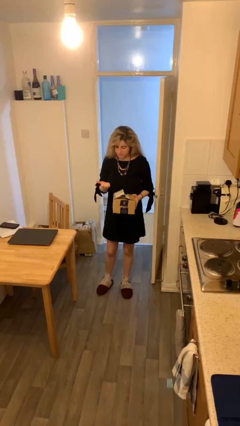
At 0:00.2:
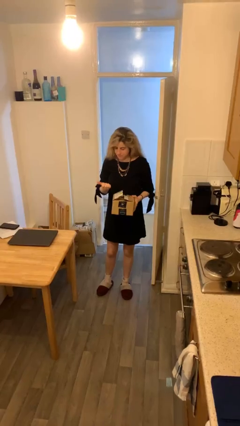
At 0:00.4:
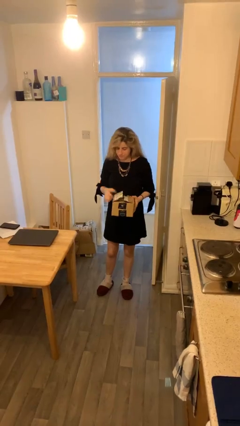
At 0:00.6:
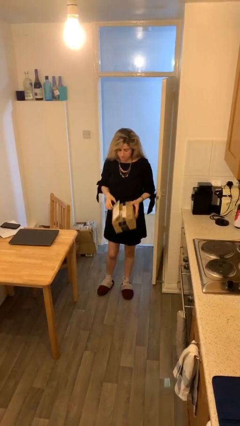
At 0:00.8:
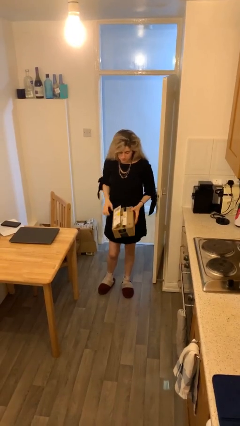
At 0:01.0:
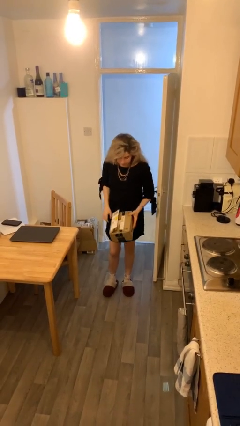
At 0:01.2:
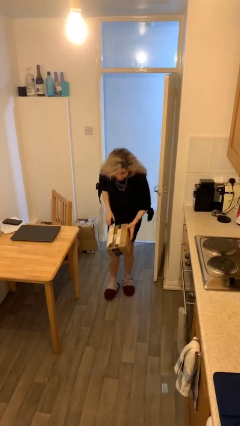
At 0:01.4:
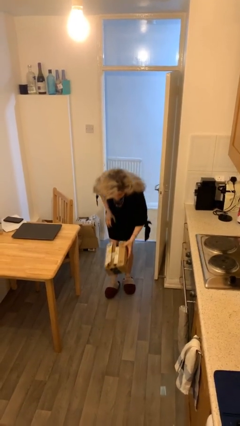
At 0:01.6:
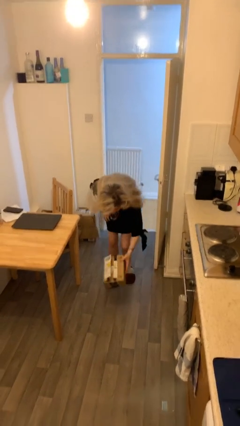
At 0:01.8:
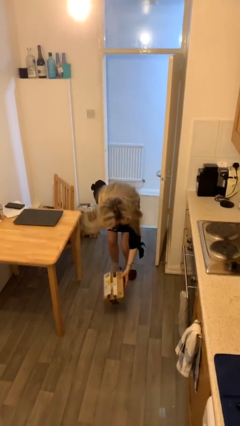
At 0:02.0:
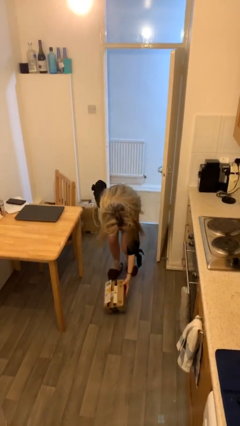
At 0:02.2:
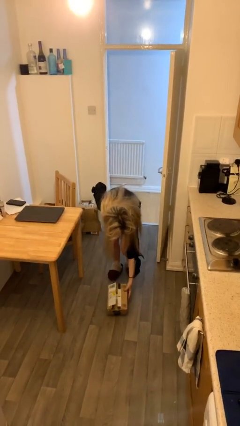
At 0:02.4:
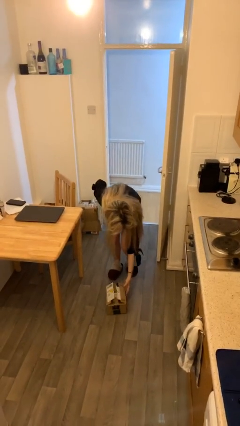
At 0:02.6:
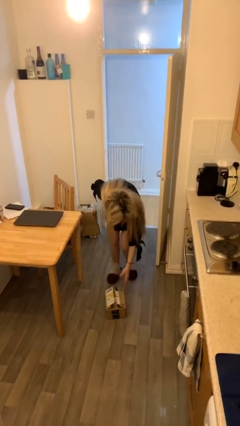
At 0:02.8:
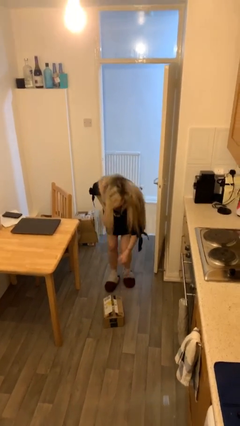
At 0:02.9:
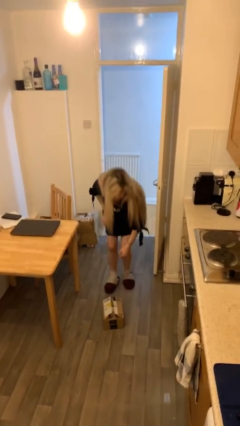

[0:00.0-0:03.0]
person puts down object on floor

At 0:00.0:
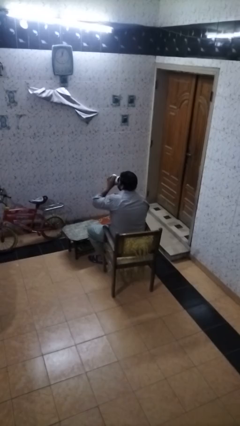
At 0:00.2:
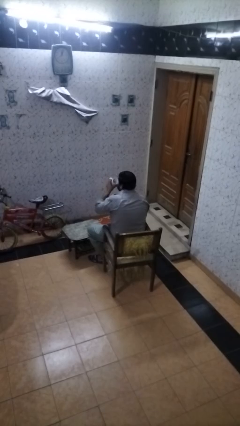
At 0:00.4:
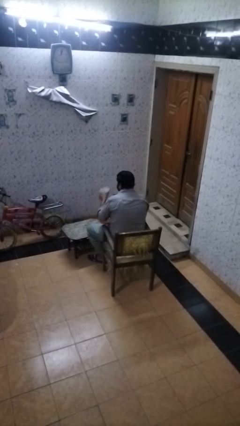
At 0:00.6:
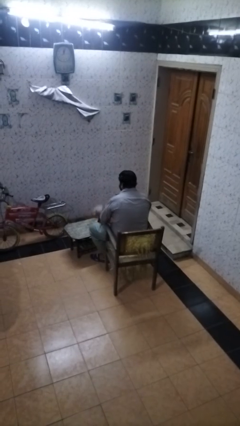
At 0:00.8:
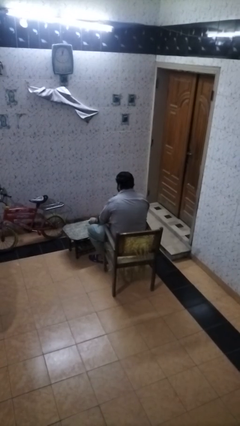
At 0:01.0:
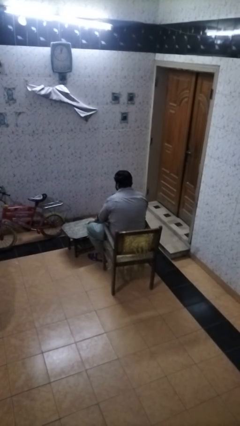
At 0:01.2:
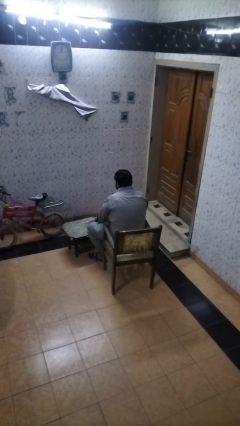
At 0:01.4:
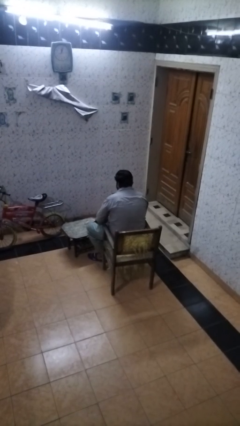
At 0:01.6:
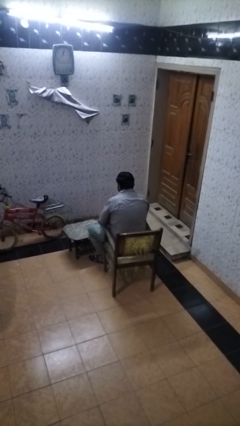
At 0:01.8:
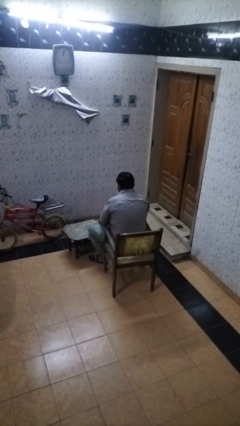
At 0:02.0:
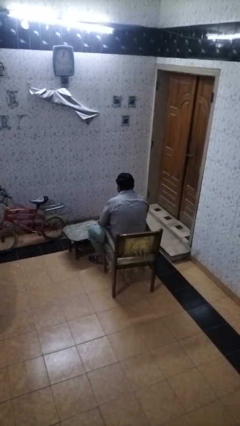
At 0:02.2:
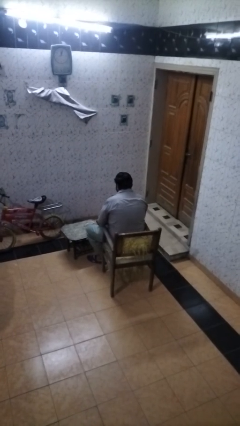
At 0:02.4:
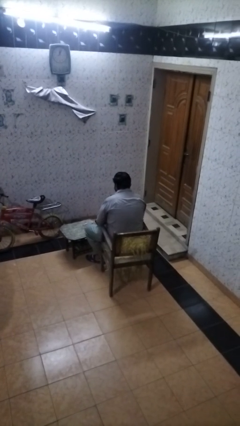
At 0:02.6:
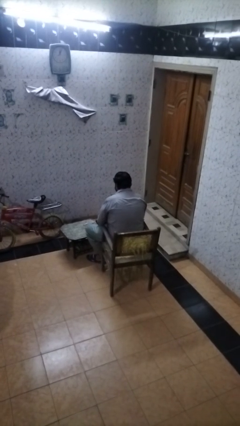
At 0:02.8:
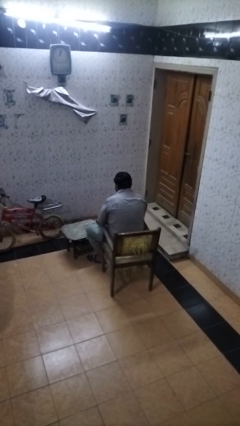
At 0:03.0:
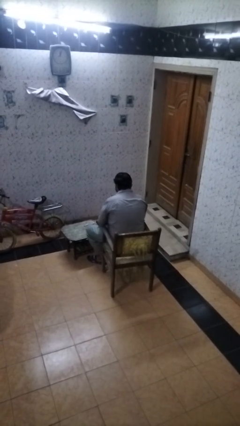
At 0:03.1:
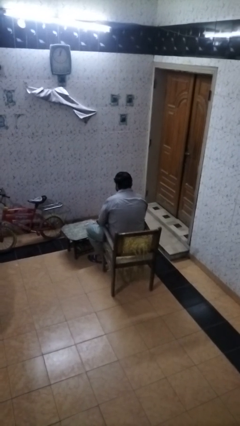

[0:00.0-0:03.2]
person puts down object on table

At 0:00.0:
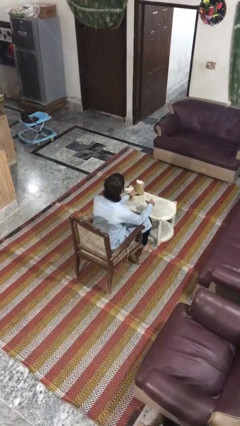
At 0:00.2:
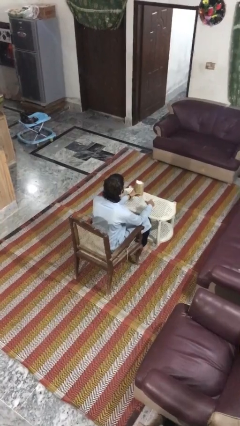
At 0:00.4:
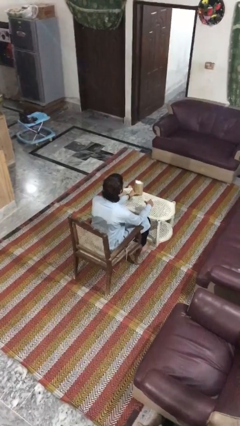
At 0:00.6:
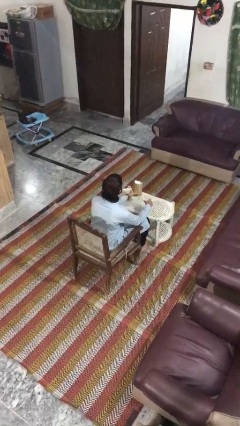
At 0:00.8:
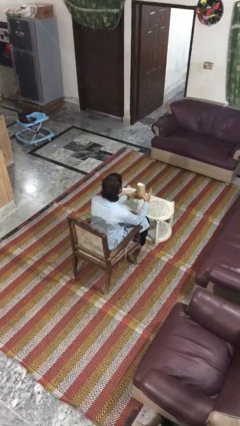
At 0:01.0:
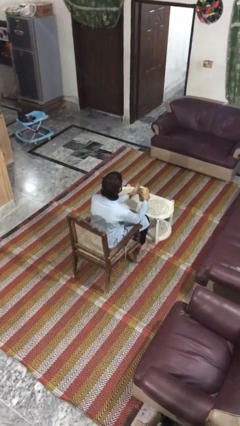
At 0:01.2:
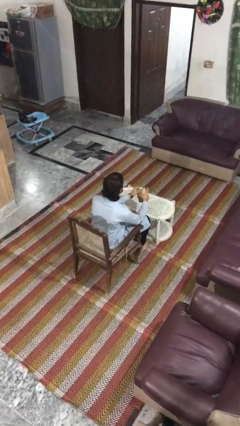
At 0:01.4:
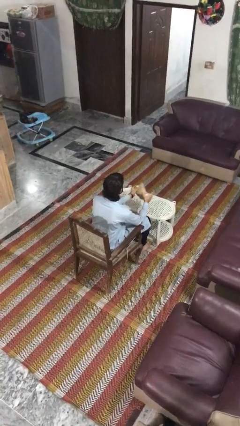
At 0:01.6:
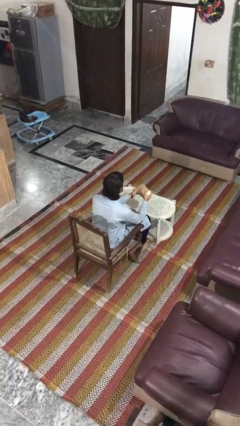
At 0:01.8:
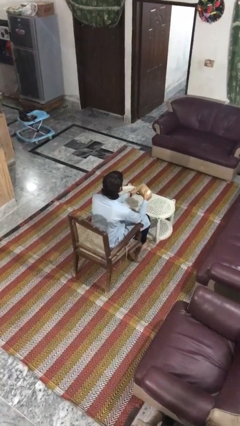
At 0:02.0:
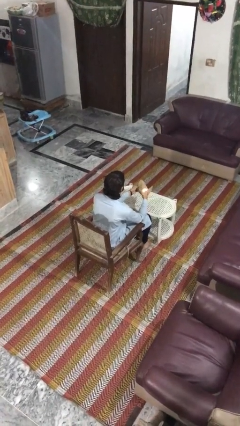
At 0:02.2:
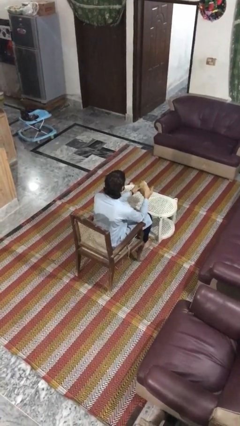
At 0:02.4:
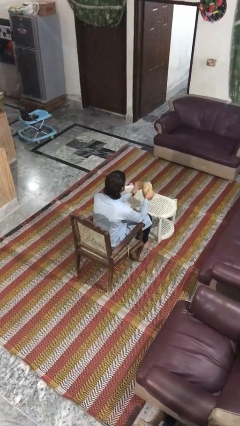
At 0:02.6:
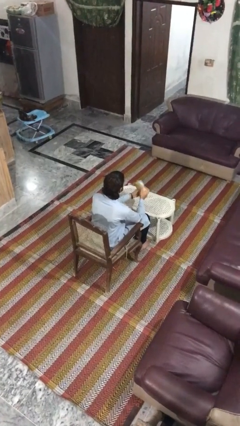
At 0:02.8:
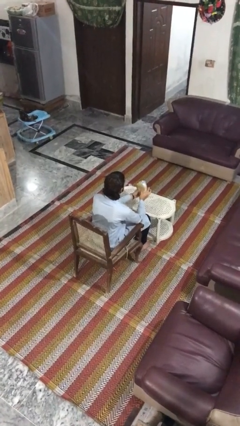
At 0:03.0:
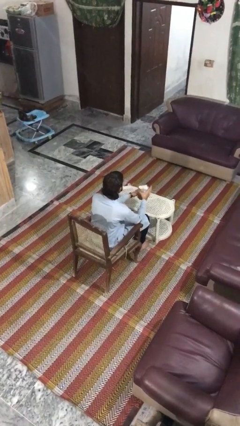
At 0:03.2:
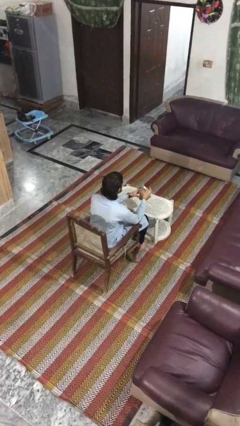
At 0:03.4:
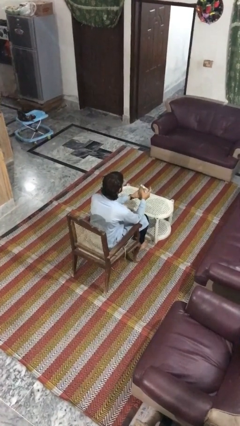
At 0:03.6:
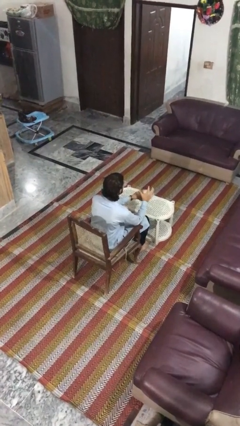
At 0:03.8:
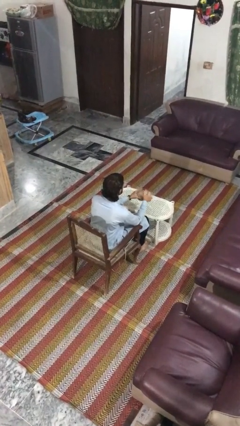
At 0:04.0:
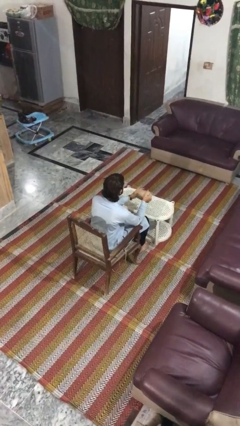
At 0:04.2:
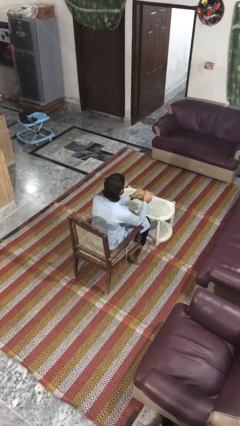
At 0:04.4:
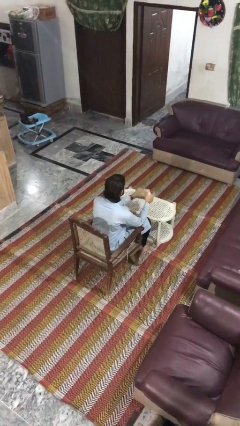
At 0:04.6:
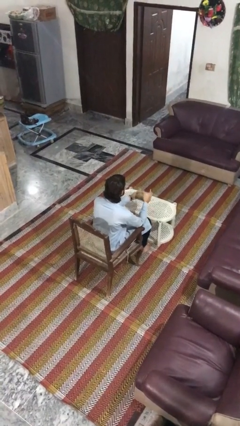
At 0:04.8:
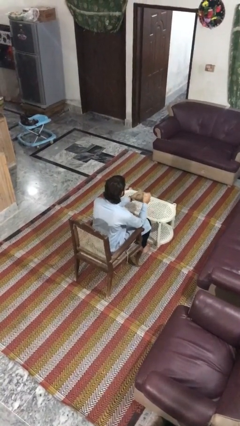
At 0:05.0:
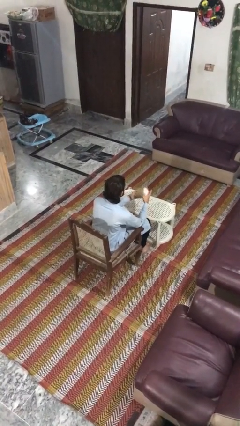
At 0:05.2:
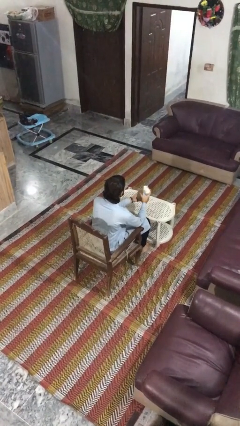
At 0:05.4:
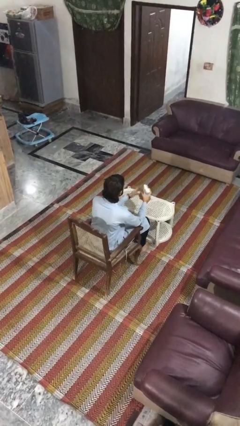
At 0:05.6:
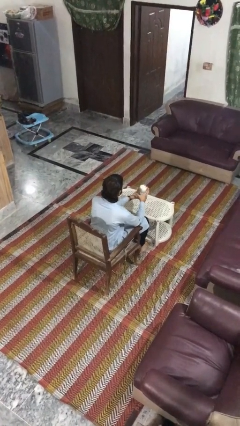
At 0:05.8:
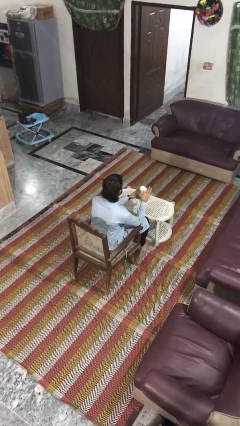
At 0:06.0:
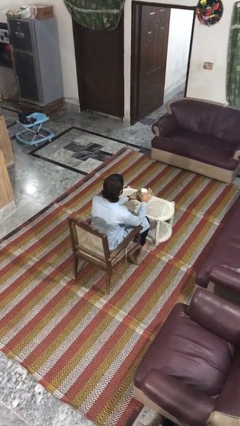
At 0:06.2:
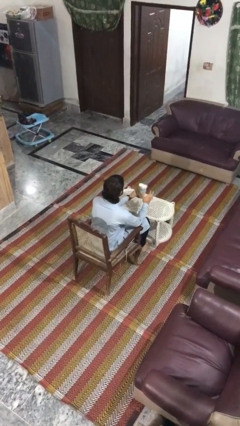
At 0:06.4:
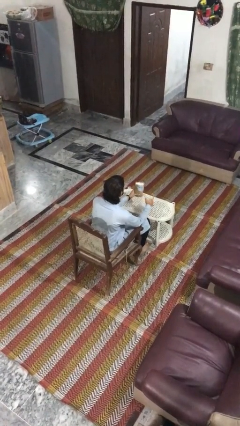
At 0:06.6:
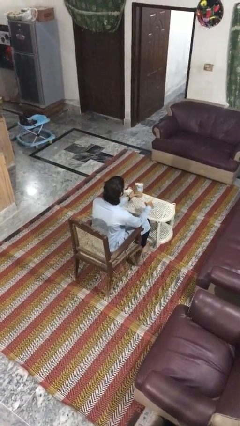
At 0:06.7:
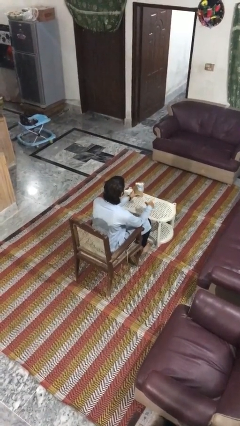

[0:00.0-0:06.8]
person squeezes object

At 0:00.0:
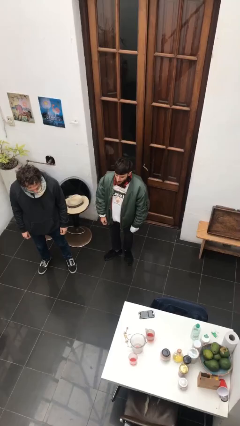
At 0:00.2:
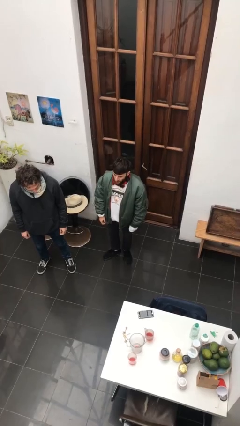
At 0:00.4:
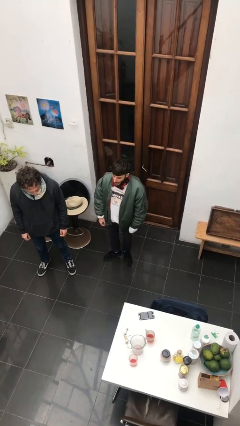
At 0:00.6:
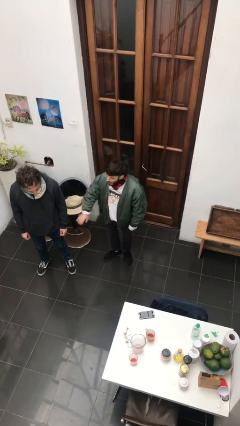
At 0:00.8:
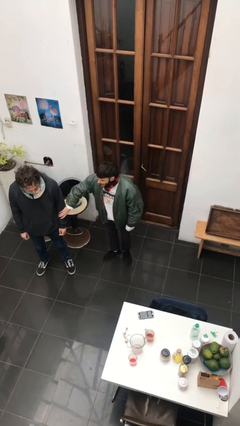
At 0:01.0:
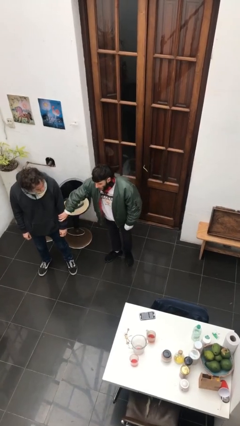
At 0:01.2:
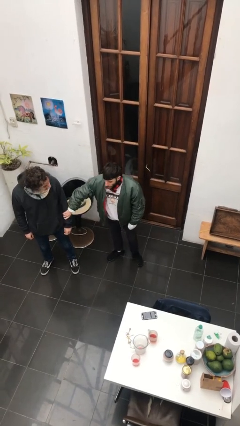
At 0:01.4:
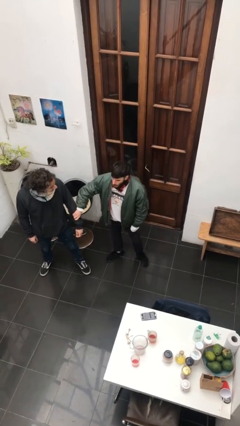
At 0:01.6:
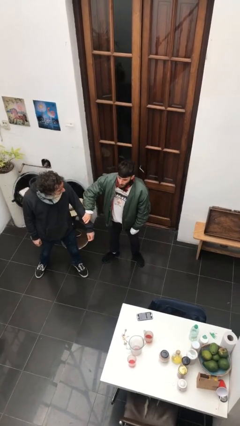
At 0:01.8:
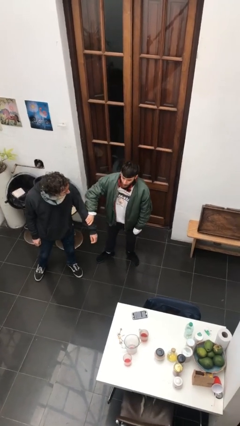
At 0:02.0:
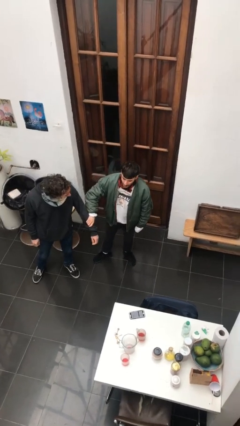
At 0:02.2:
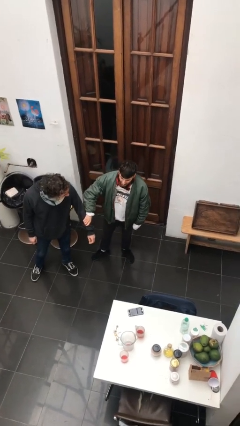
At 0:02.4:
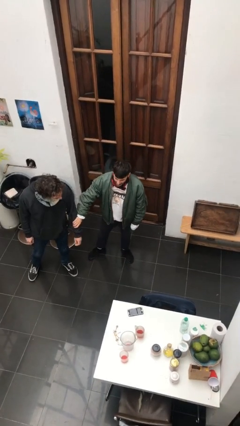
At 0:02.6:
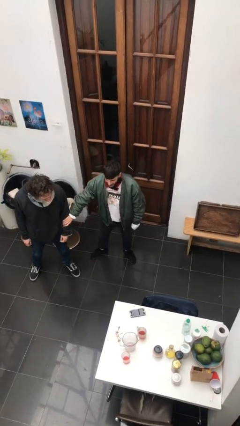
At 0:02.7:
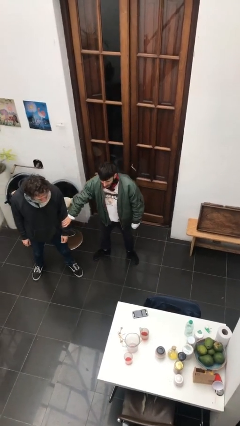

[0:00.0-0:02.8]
person grabs person by forearm

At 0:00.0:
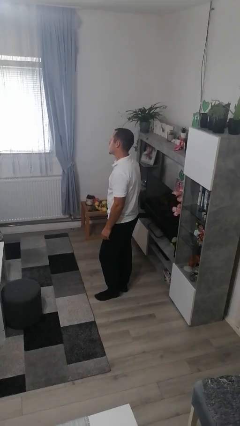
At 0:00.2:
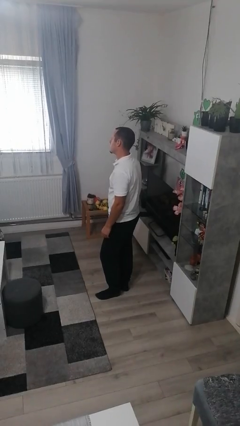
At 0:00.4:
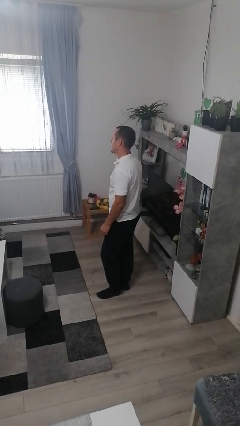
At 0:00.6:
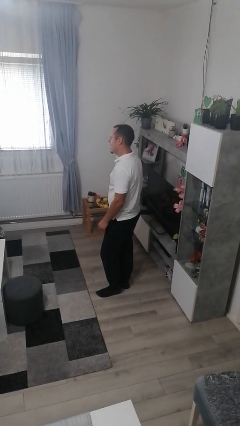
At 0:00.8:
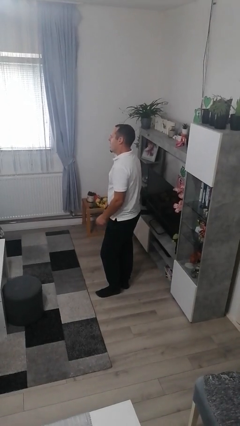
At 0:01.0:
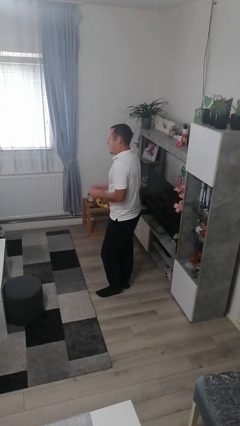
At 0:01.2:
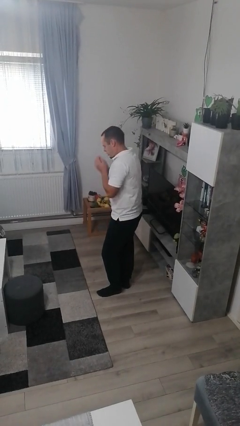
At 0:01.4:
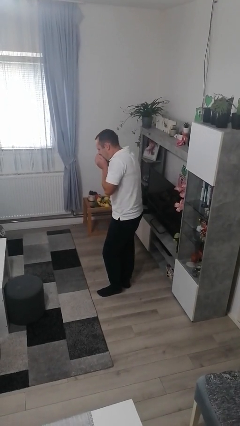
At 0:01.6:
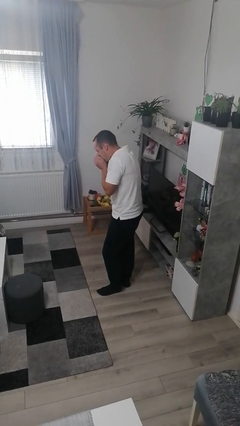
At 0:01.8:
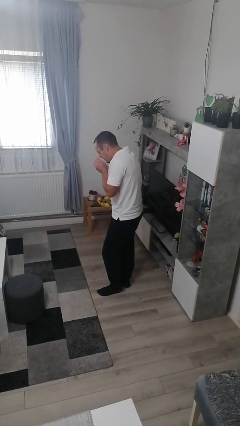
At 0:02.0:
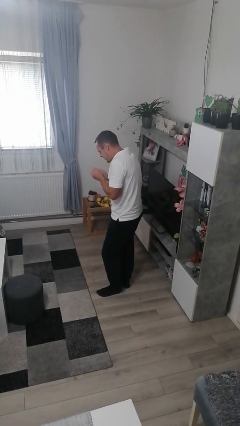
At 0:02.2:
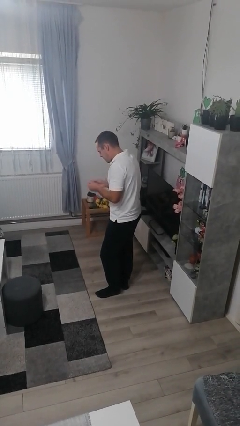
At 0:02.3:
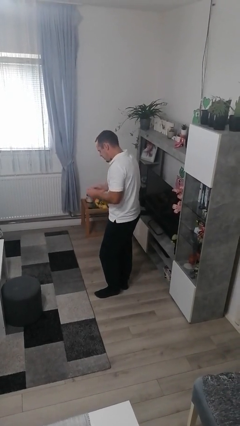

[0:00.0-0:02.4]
person sneezes into hand
